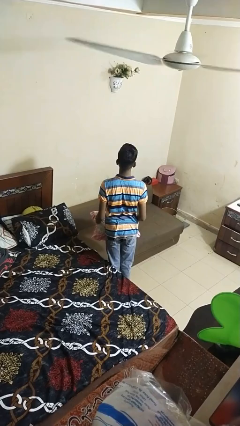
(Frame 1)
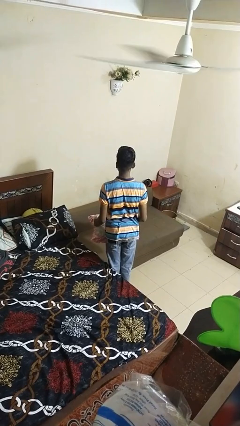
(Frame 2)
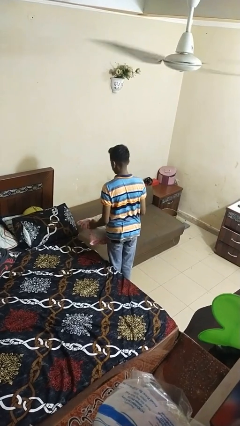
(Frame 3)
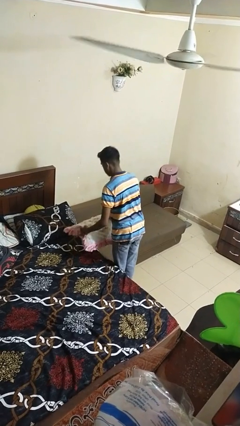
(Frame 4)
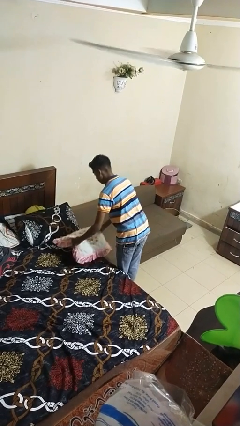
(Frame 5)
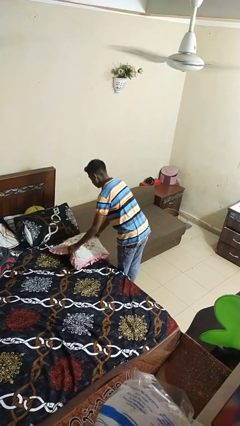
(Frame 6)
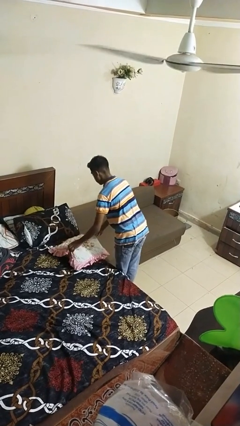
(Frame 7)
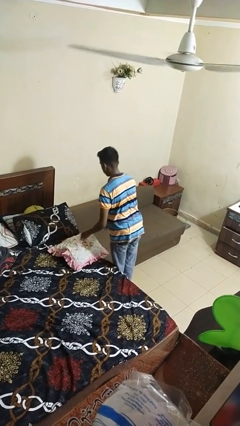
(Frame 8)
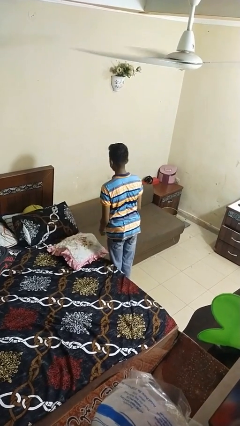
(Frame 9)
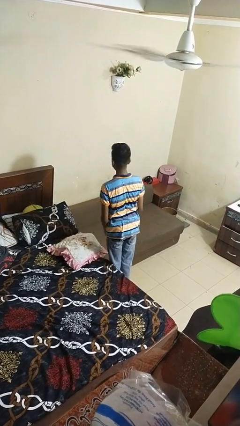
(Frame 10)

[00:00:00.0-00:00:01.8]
person puts down object on bed

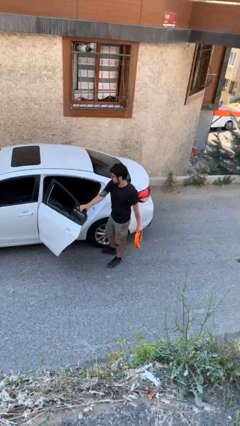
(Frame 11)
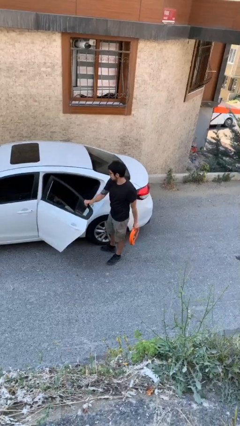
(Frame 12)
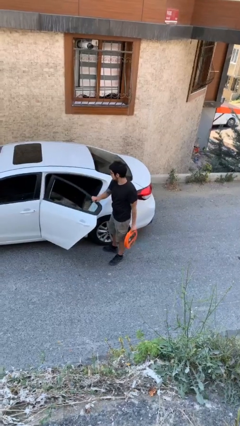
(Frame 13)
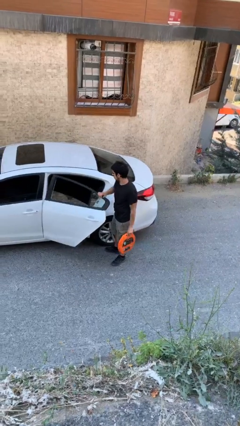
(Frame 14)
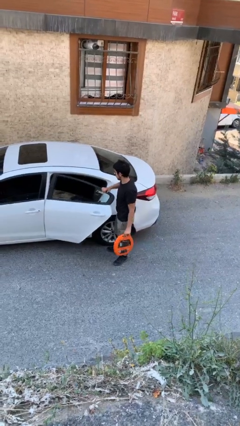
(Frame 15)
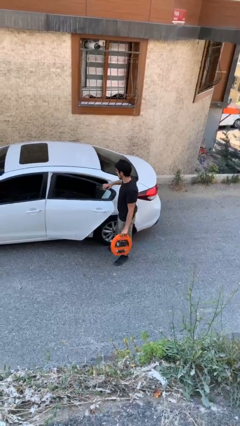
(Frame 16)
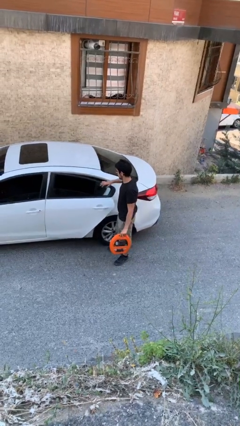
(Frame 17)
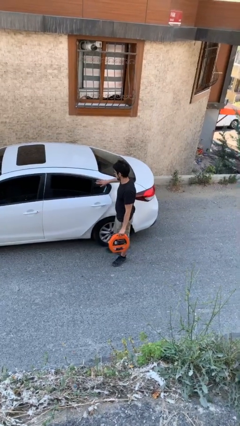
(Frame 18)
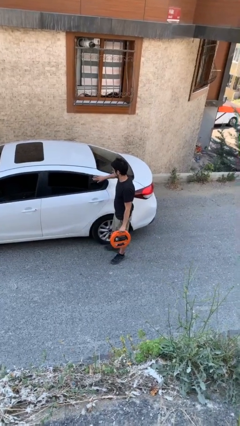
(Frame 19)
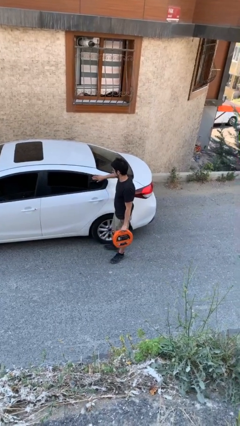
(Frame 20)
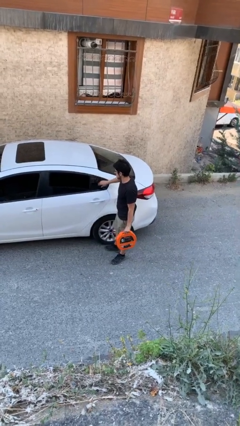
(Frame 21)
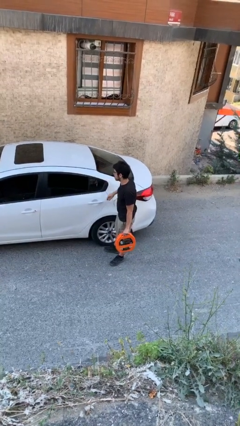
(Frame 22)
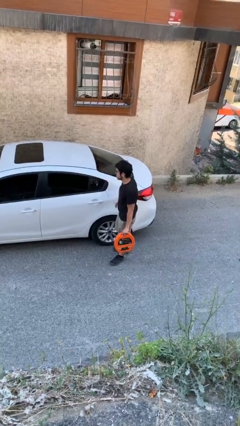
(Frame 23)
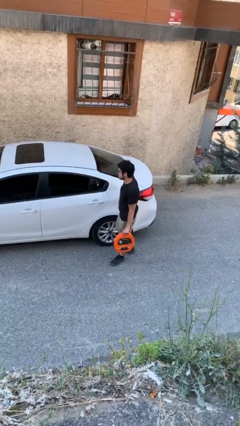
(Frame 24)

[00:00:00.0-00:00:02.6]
person closes car door

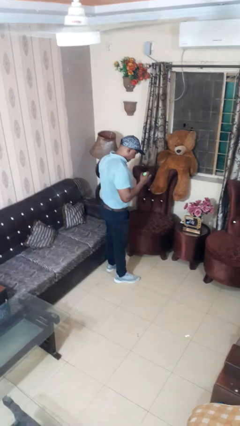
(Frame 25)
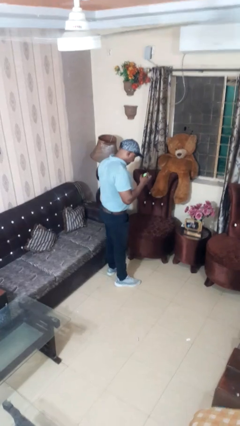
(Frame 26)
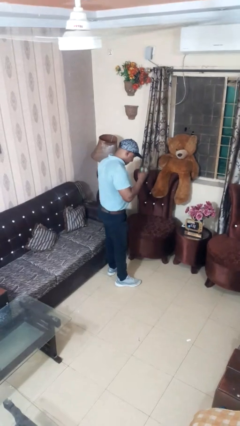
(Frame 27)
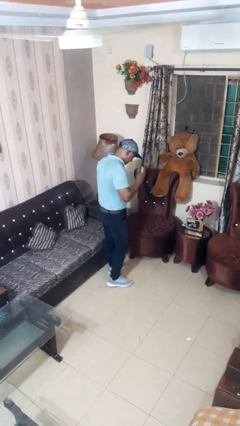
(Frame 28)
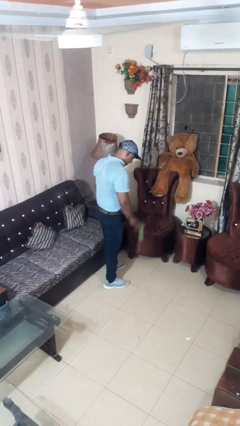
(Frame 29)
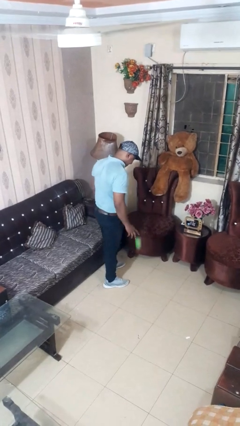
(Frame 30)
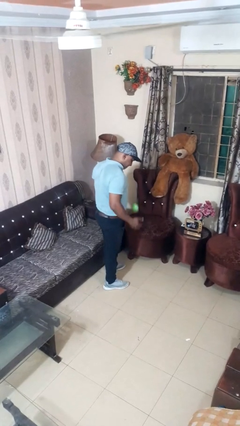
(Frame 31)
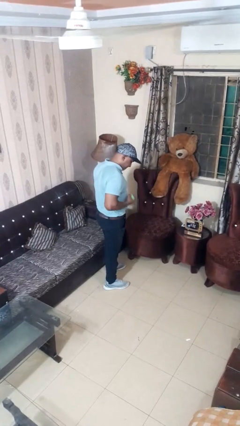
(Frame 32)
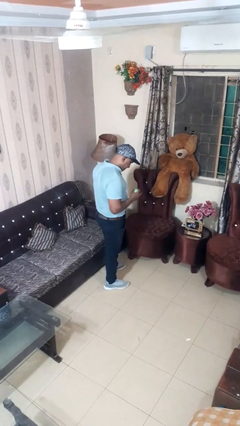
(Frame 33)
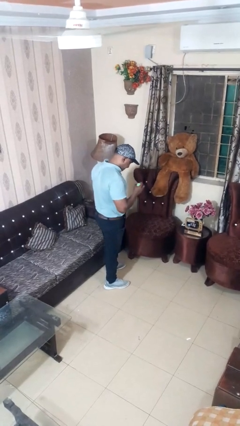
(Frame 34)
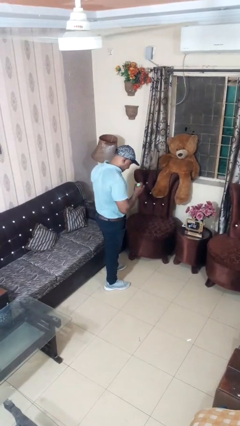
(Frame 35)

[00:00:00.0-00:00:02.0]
person bounces ball on floor

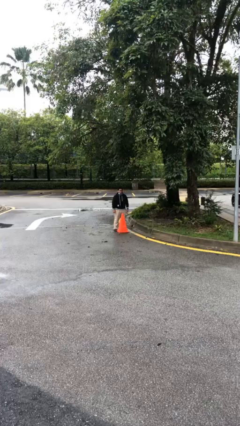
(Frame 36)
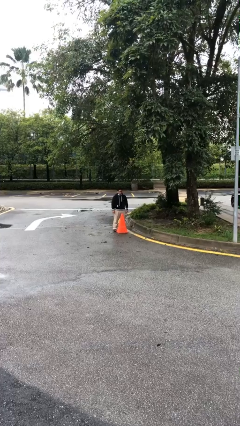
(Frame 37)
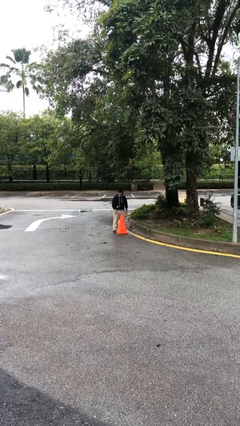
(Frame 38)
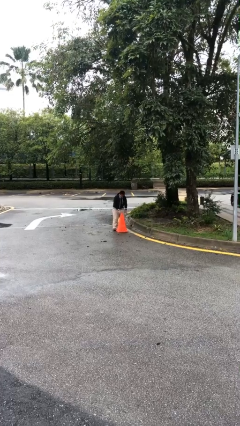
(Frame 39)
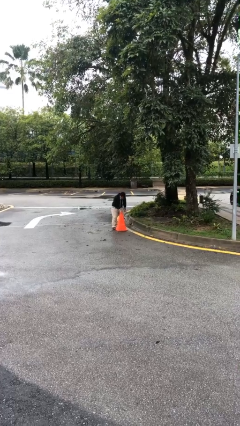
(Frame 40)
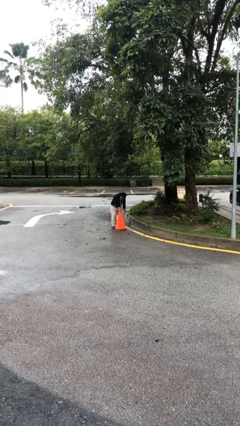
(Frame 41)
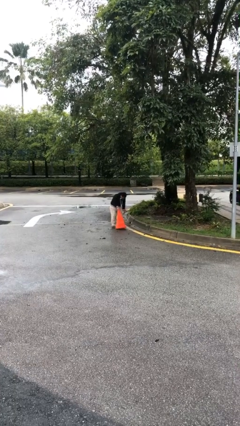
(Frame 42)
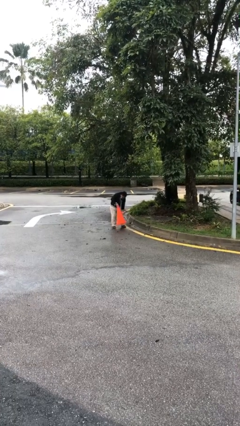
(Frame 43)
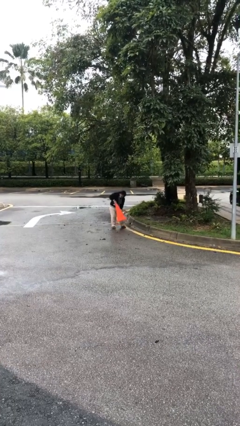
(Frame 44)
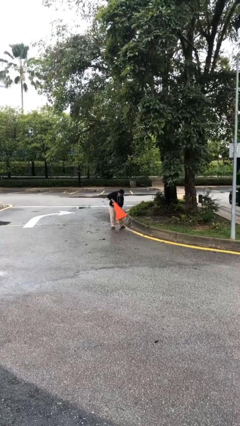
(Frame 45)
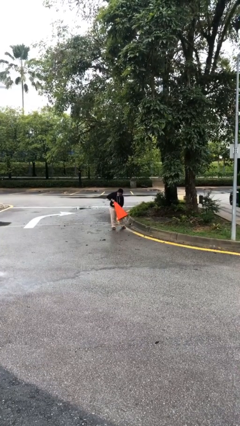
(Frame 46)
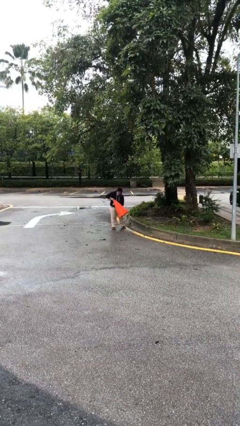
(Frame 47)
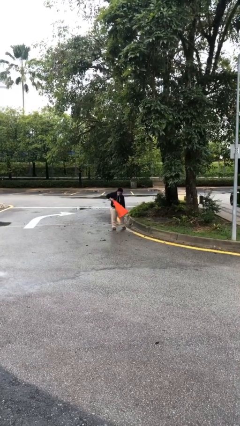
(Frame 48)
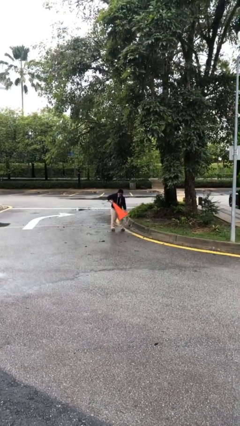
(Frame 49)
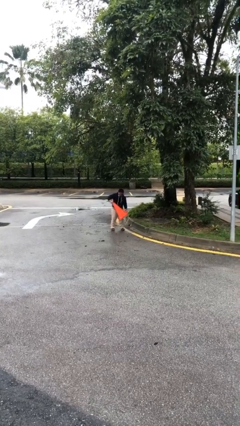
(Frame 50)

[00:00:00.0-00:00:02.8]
person picks up object from floor

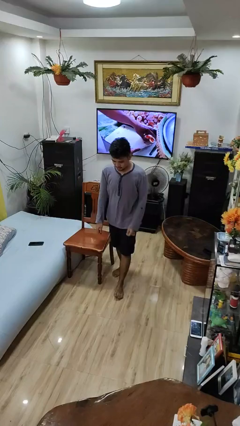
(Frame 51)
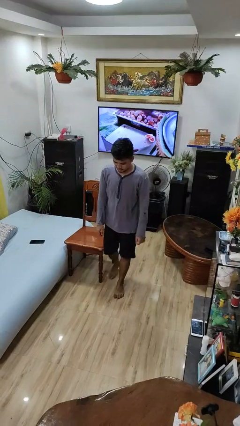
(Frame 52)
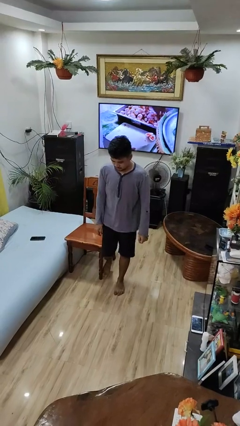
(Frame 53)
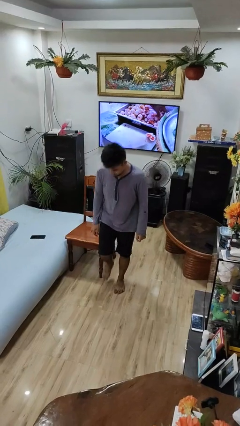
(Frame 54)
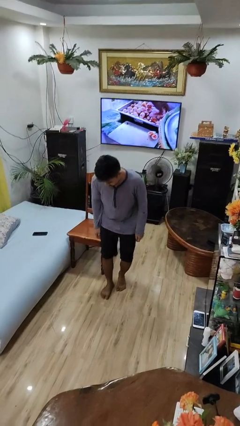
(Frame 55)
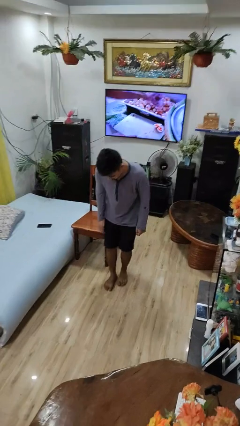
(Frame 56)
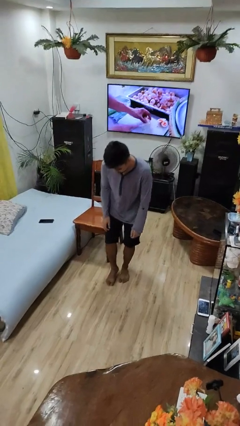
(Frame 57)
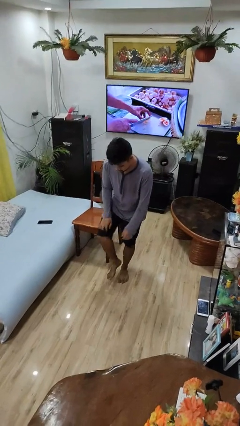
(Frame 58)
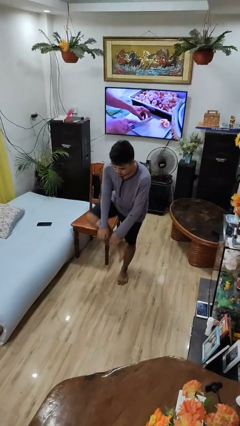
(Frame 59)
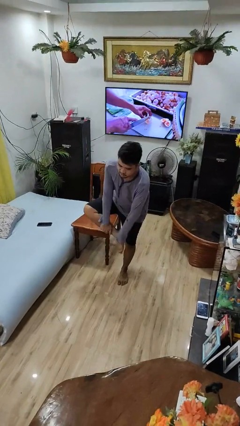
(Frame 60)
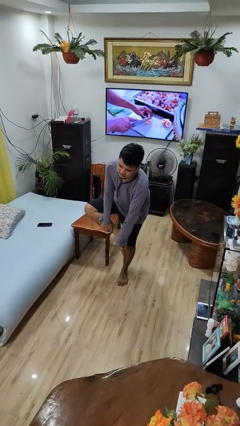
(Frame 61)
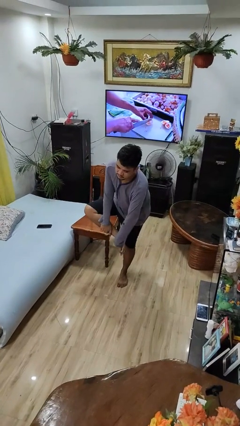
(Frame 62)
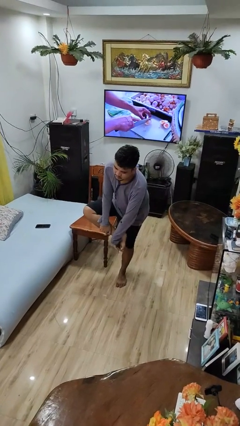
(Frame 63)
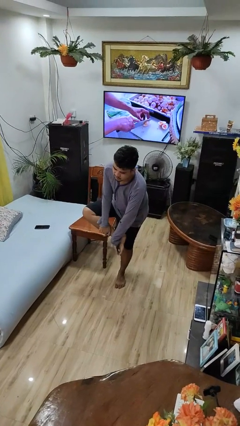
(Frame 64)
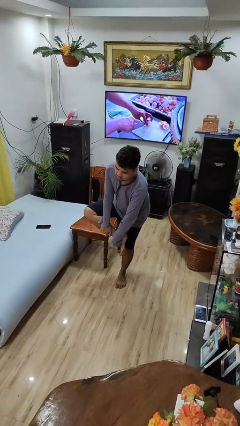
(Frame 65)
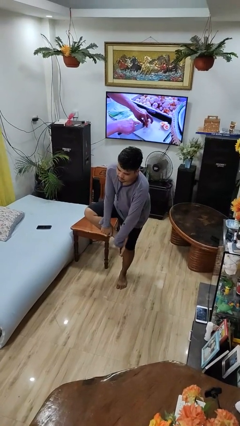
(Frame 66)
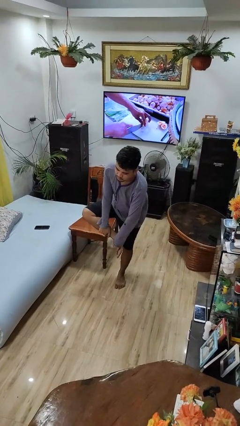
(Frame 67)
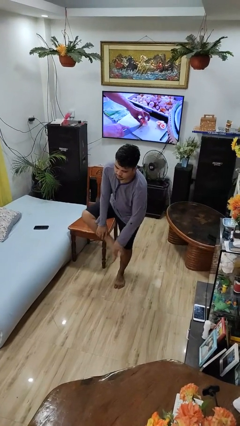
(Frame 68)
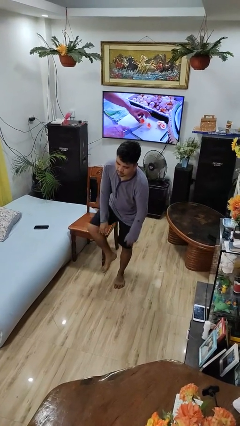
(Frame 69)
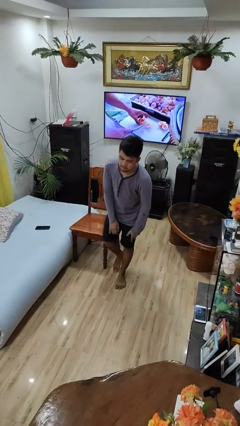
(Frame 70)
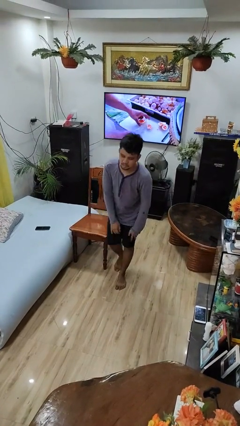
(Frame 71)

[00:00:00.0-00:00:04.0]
person stubs toe

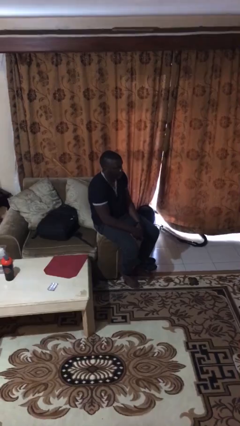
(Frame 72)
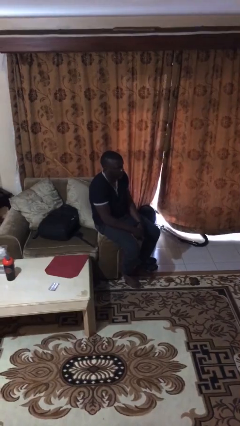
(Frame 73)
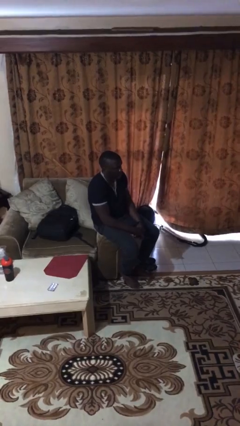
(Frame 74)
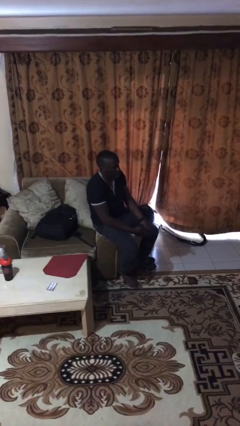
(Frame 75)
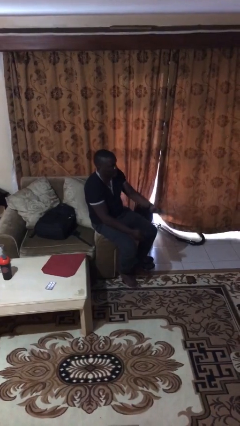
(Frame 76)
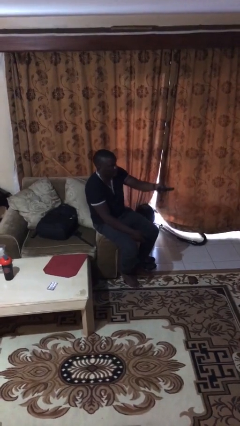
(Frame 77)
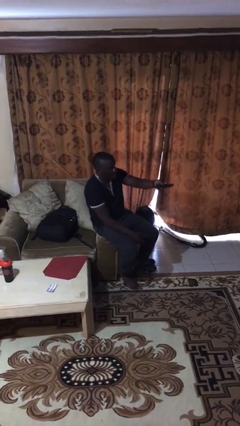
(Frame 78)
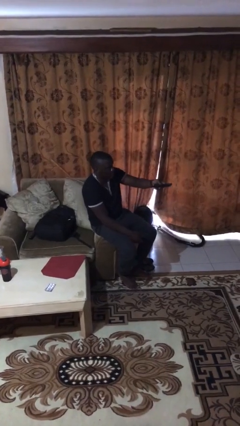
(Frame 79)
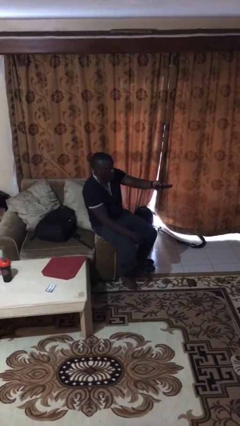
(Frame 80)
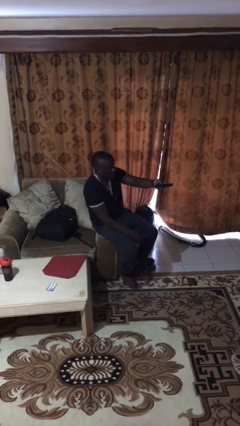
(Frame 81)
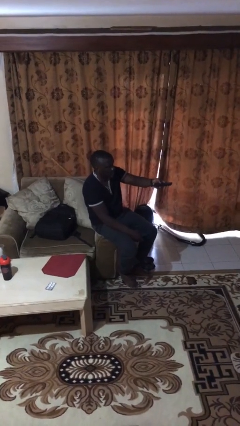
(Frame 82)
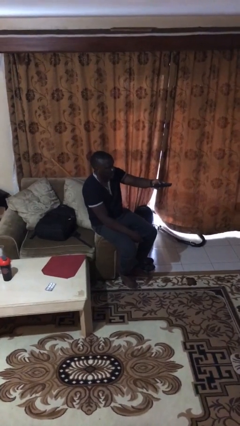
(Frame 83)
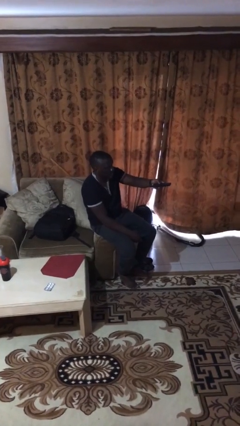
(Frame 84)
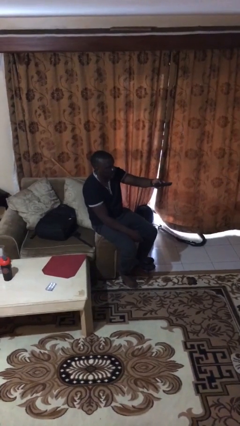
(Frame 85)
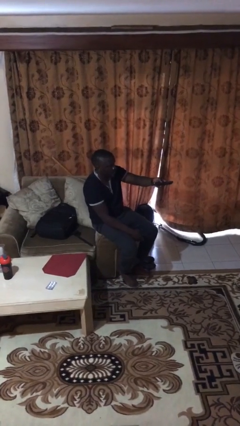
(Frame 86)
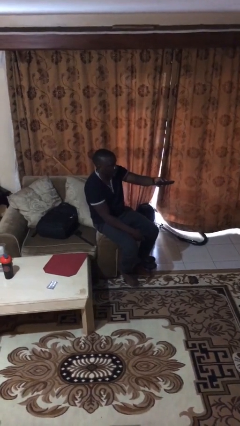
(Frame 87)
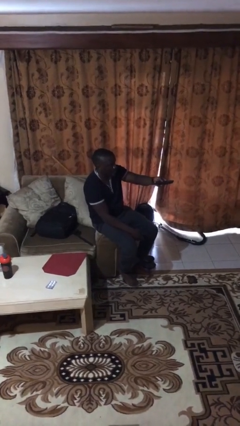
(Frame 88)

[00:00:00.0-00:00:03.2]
person uses television remote

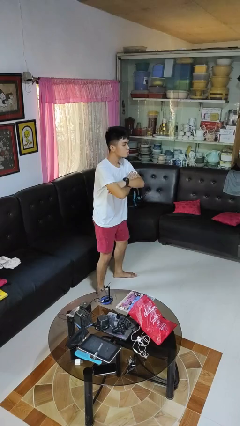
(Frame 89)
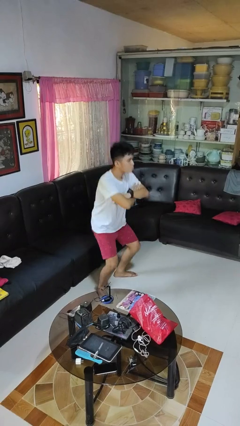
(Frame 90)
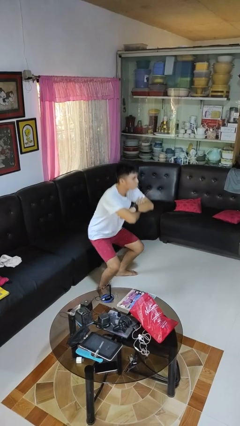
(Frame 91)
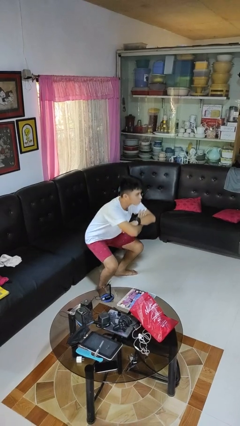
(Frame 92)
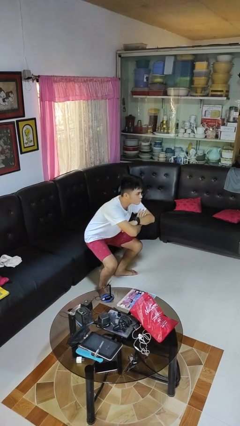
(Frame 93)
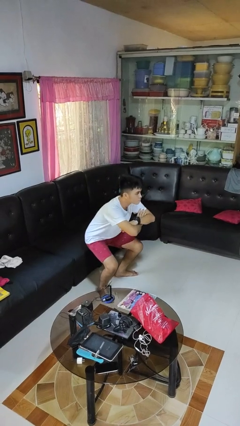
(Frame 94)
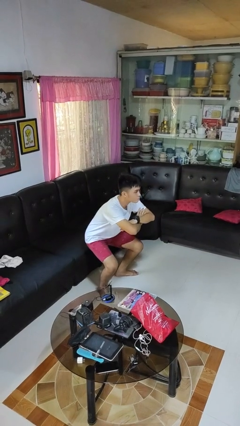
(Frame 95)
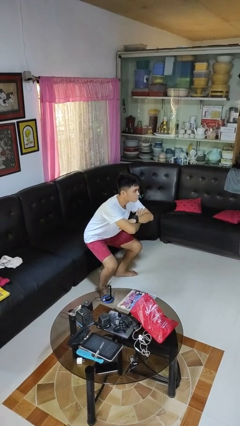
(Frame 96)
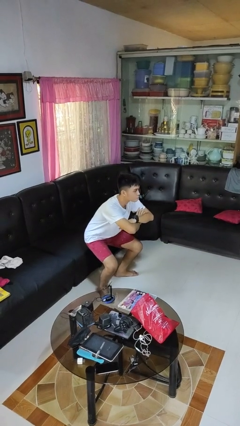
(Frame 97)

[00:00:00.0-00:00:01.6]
person squats
